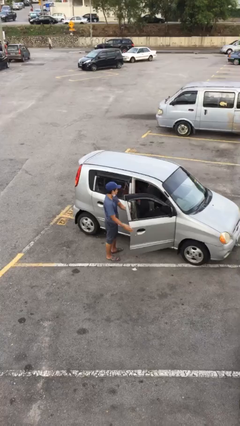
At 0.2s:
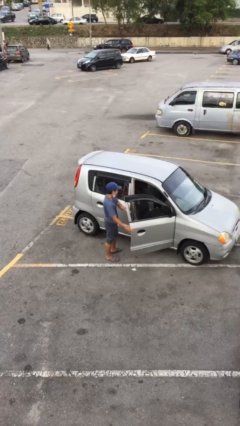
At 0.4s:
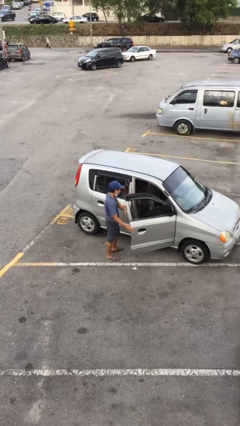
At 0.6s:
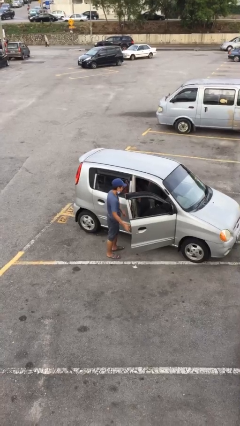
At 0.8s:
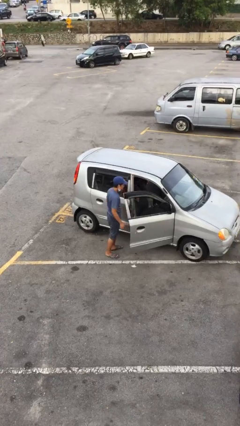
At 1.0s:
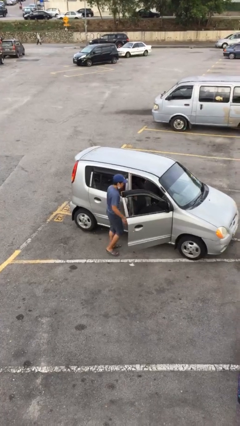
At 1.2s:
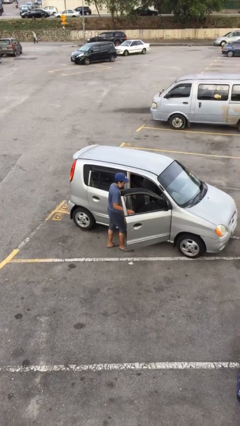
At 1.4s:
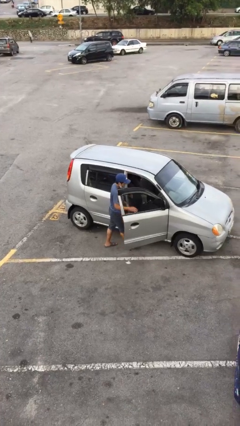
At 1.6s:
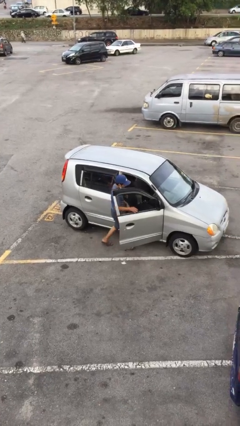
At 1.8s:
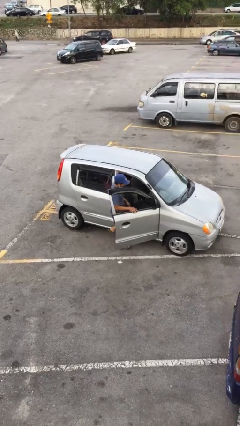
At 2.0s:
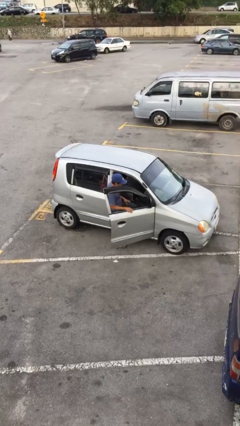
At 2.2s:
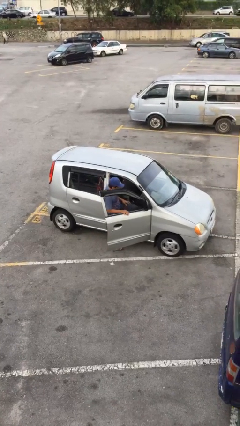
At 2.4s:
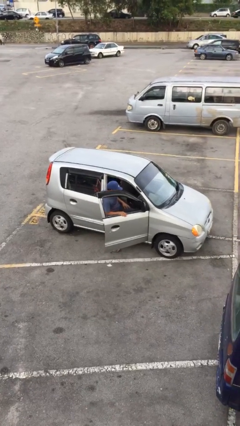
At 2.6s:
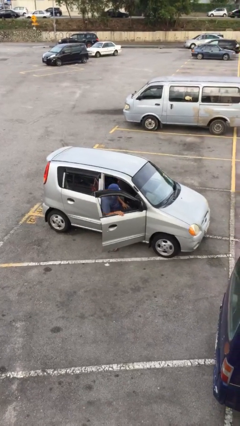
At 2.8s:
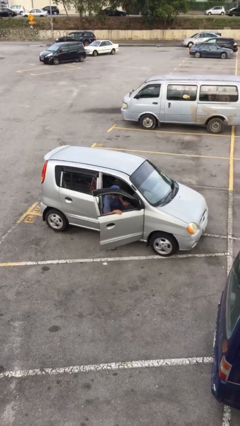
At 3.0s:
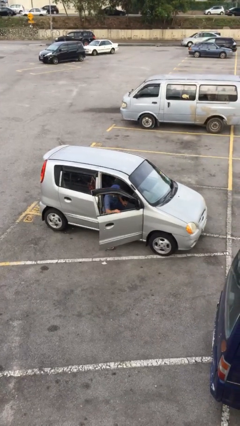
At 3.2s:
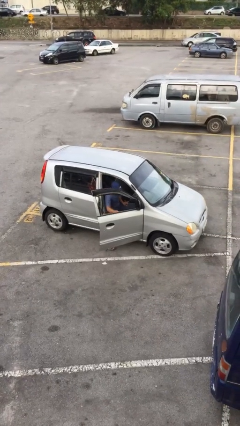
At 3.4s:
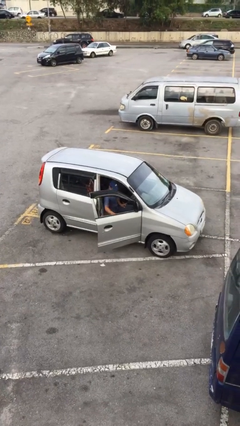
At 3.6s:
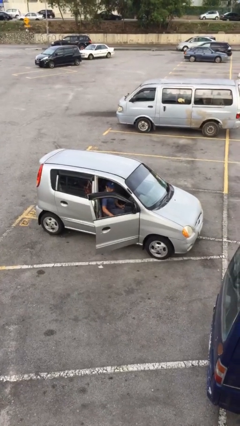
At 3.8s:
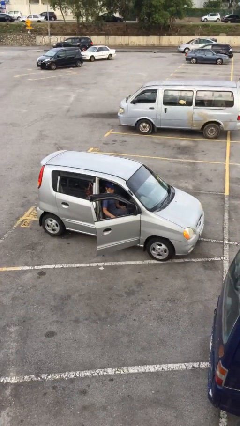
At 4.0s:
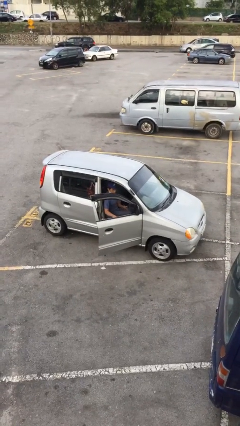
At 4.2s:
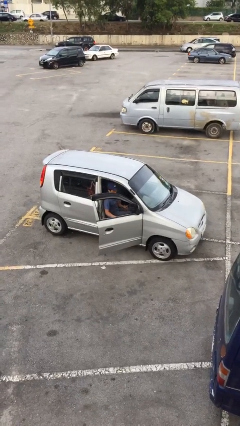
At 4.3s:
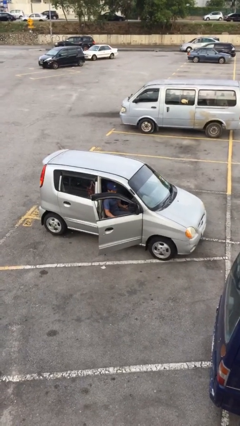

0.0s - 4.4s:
person enters car

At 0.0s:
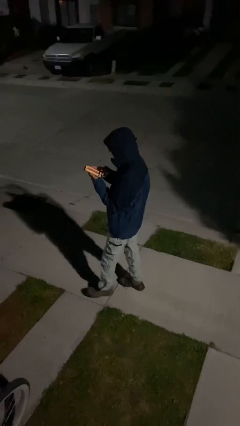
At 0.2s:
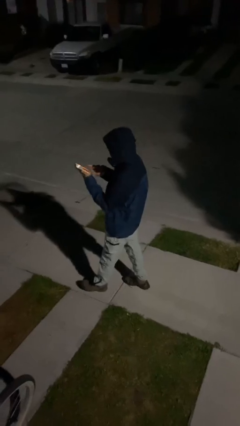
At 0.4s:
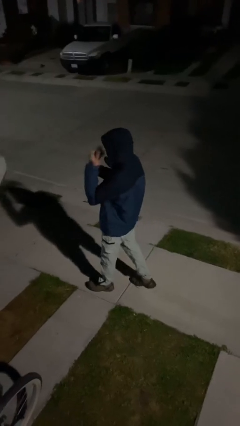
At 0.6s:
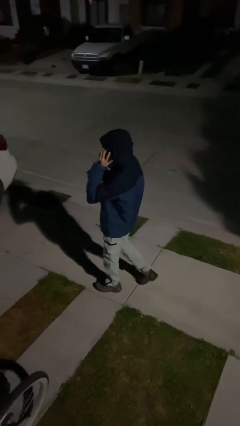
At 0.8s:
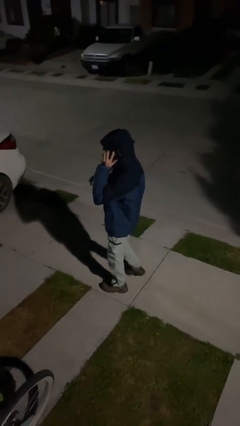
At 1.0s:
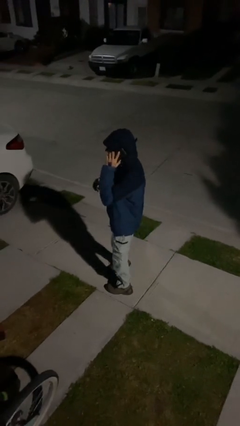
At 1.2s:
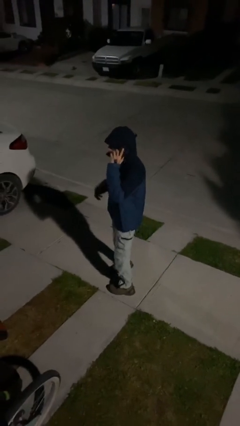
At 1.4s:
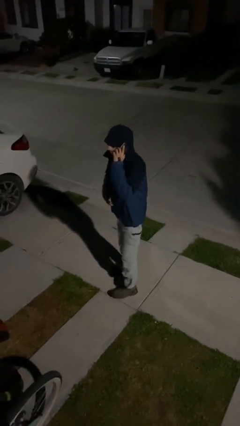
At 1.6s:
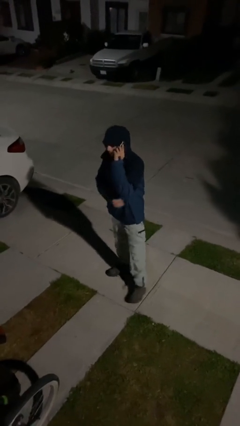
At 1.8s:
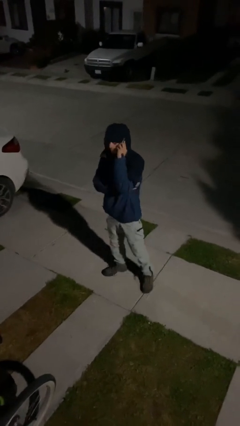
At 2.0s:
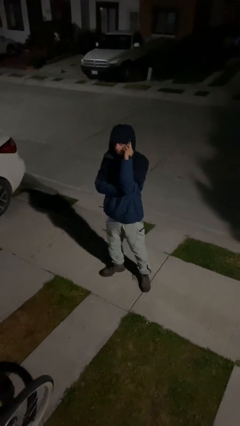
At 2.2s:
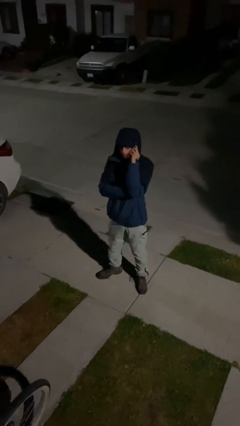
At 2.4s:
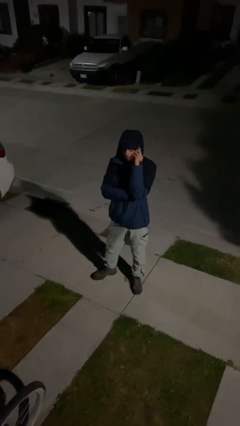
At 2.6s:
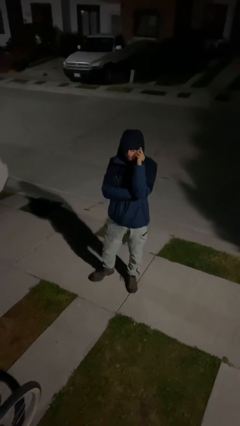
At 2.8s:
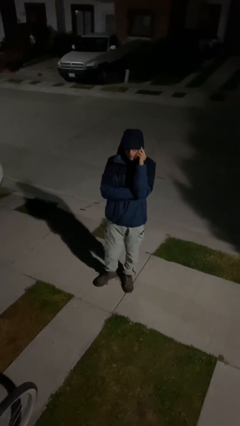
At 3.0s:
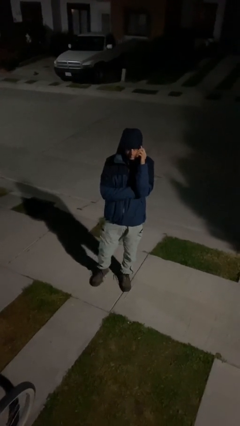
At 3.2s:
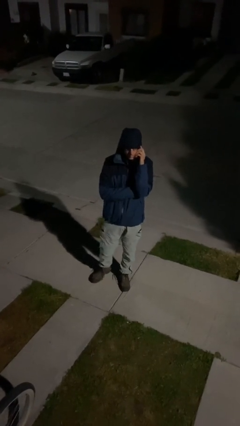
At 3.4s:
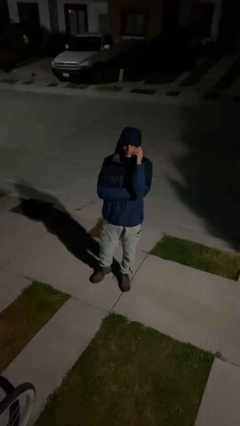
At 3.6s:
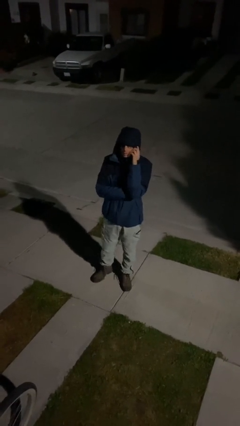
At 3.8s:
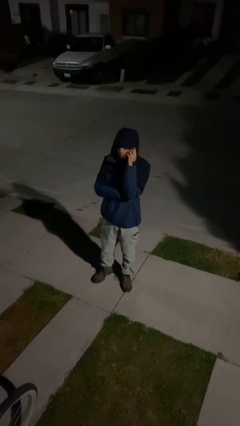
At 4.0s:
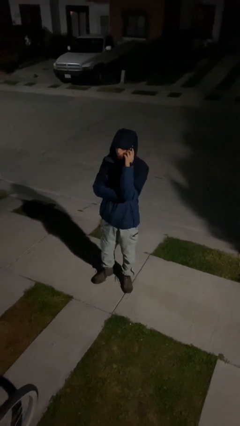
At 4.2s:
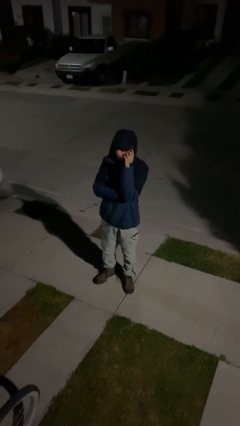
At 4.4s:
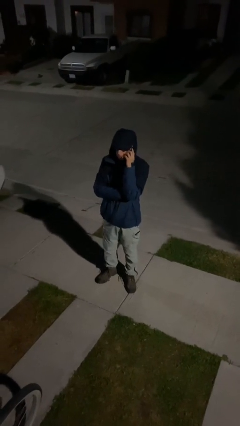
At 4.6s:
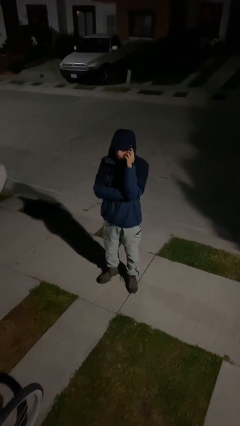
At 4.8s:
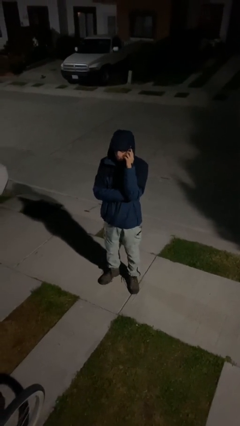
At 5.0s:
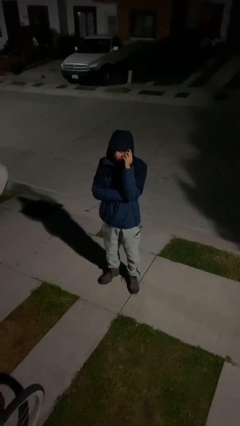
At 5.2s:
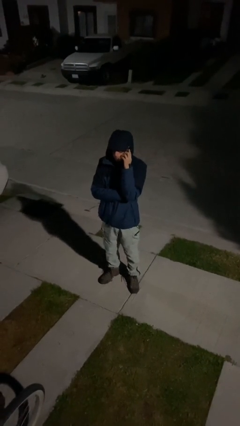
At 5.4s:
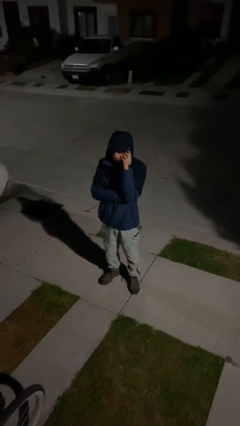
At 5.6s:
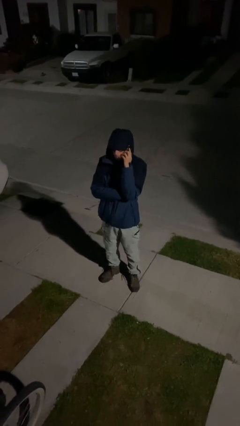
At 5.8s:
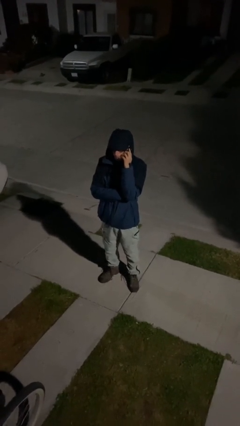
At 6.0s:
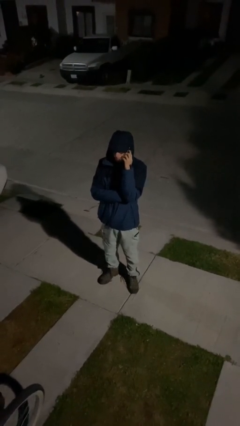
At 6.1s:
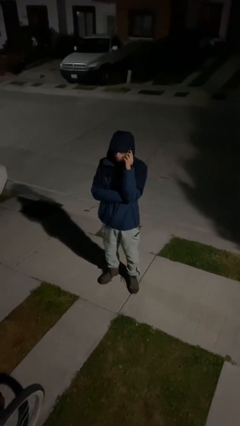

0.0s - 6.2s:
person talks on phone

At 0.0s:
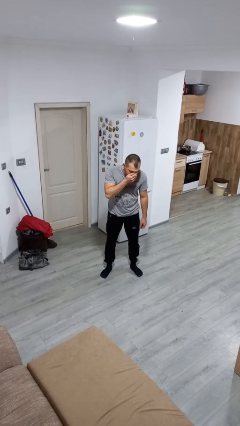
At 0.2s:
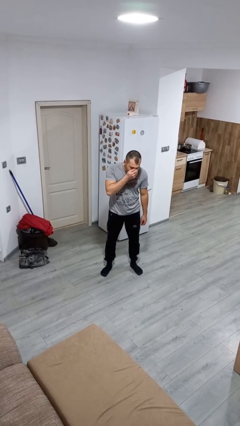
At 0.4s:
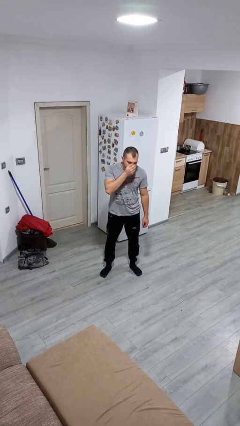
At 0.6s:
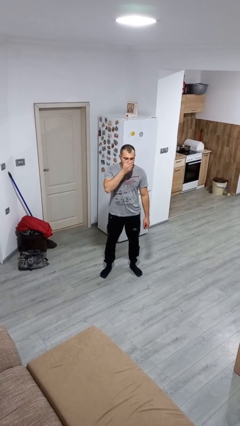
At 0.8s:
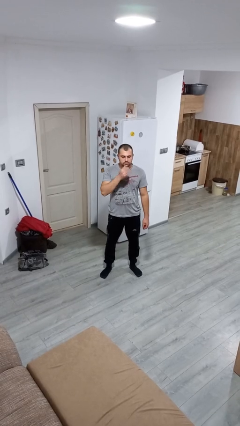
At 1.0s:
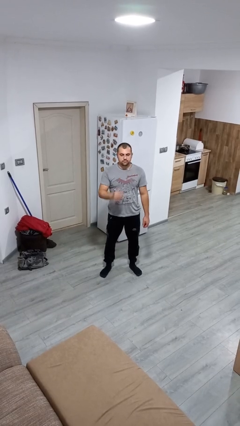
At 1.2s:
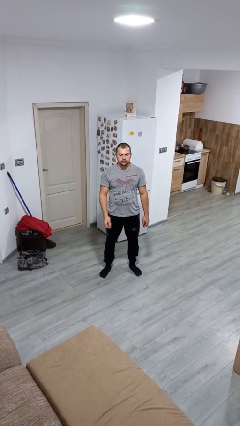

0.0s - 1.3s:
person sneezes into hand

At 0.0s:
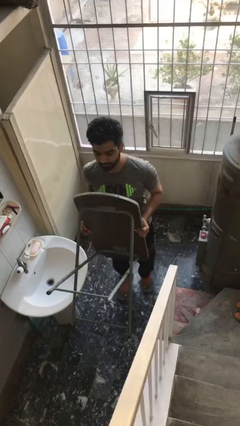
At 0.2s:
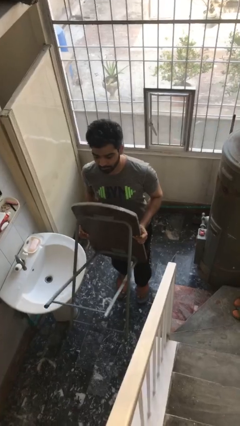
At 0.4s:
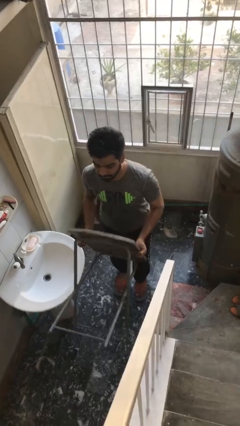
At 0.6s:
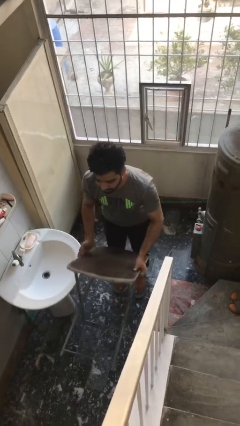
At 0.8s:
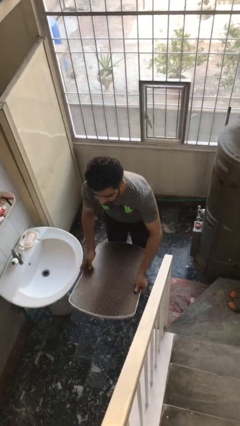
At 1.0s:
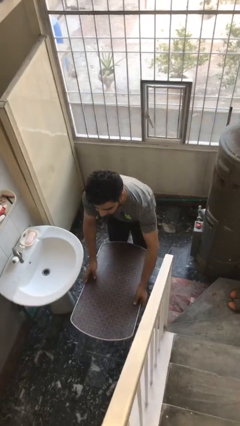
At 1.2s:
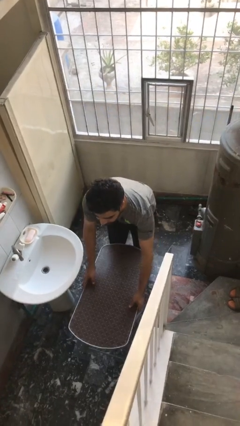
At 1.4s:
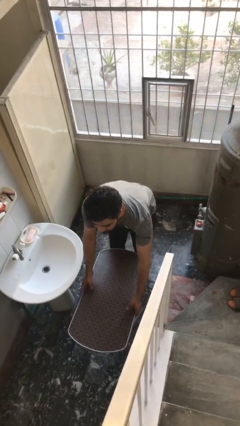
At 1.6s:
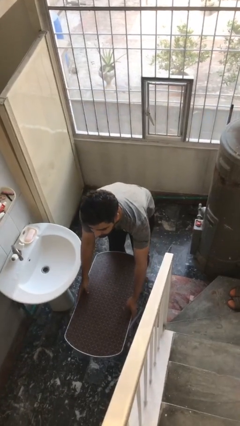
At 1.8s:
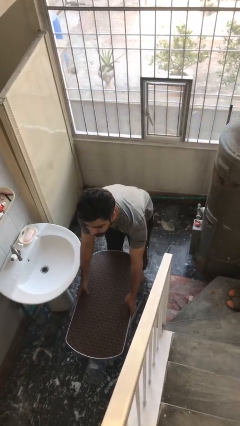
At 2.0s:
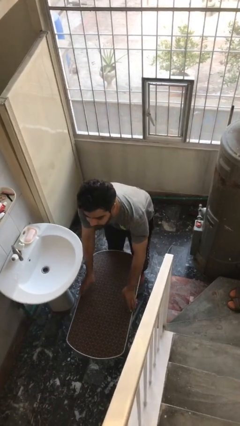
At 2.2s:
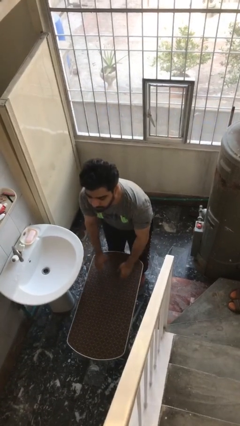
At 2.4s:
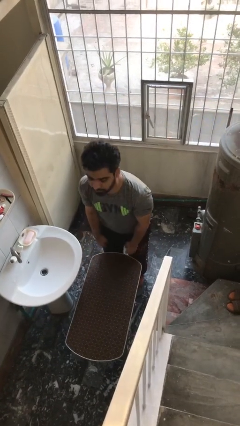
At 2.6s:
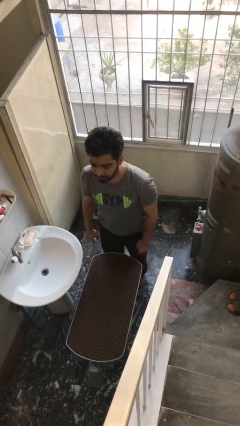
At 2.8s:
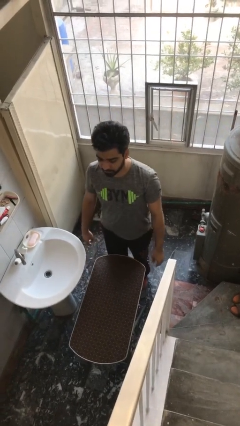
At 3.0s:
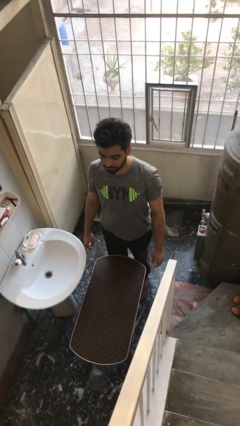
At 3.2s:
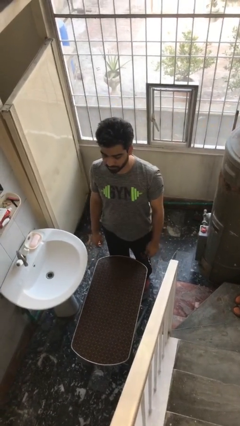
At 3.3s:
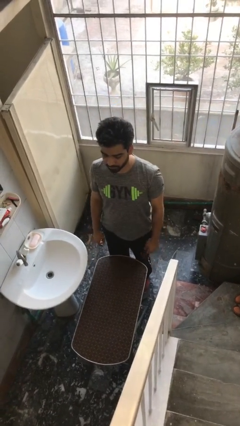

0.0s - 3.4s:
person puts down object on floor

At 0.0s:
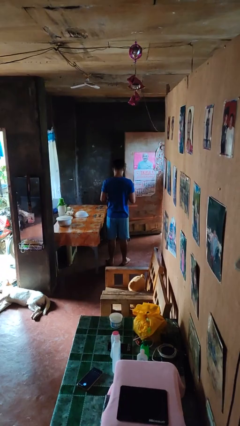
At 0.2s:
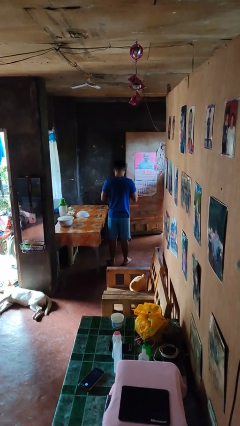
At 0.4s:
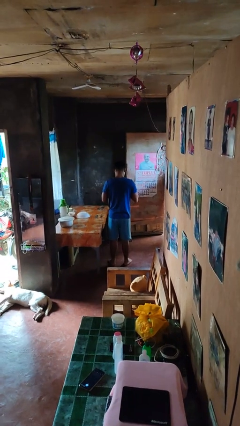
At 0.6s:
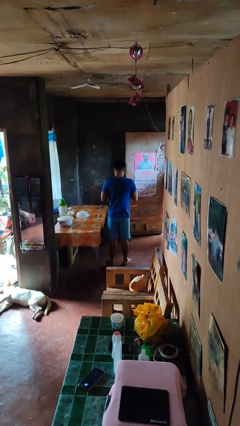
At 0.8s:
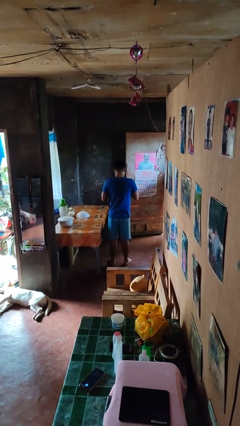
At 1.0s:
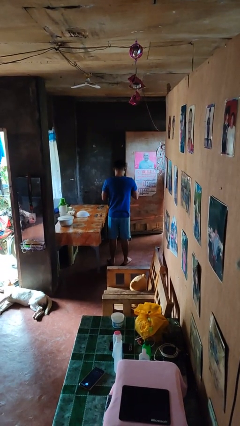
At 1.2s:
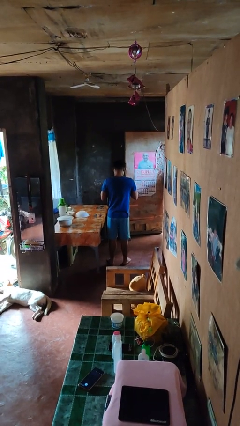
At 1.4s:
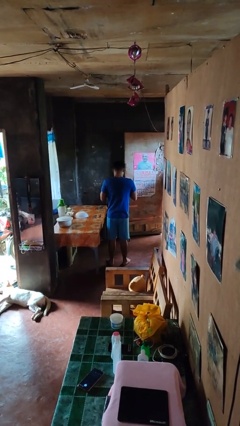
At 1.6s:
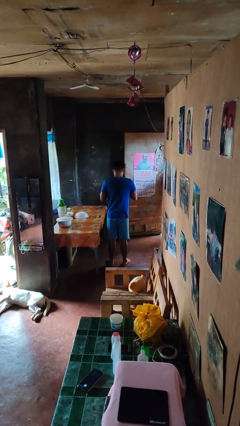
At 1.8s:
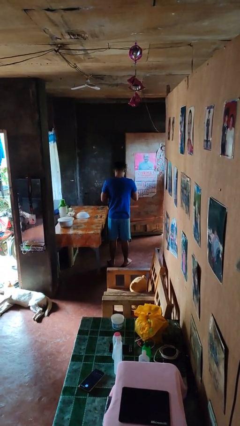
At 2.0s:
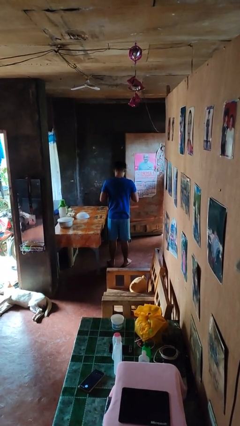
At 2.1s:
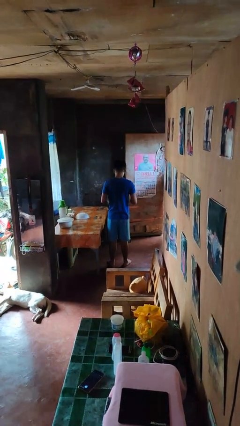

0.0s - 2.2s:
person buttons shirt

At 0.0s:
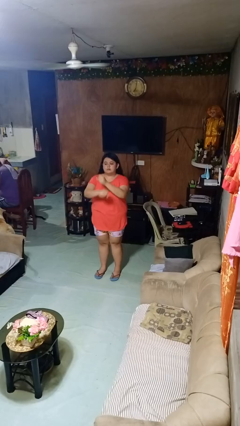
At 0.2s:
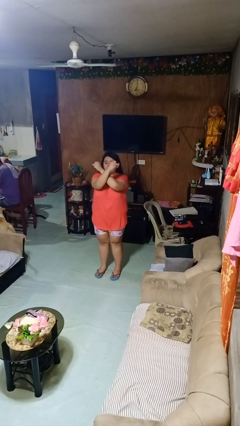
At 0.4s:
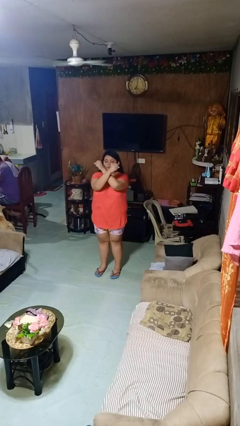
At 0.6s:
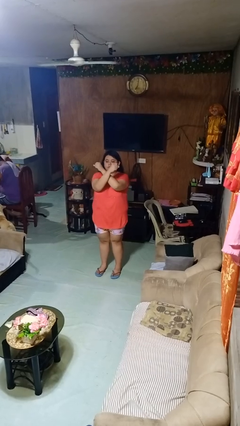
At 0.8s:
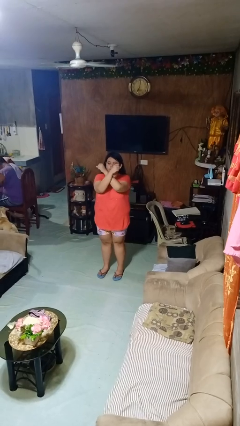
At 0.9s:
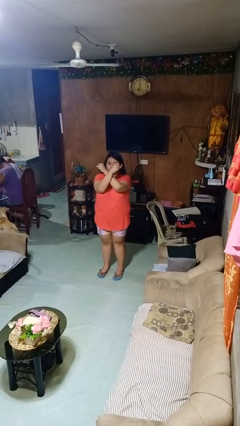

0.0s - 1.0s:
person gestures arms x
